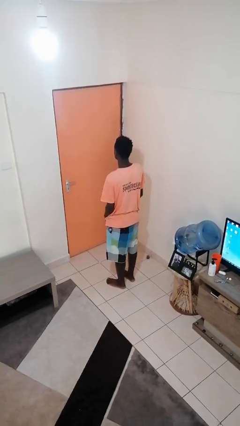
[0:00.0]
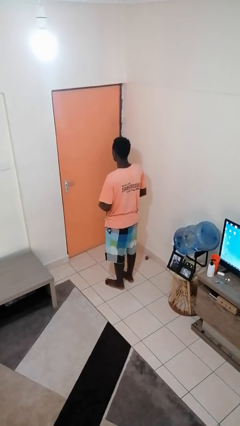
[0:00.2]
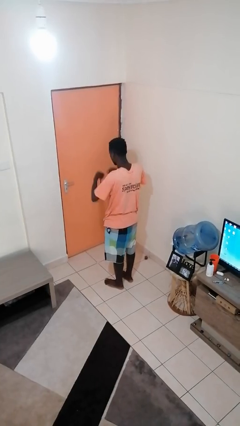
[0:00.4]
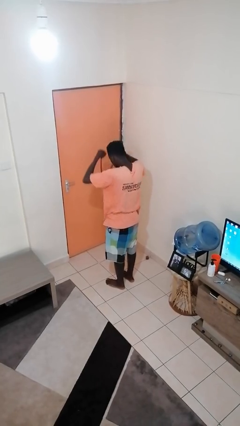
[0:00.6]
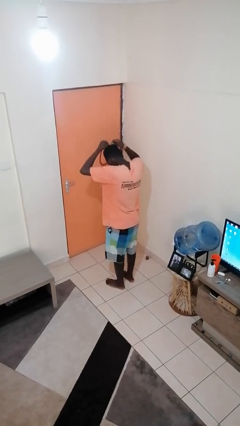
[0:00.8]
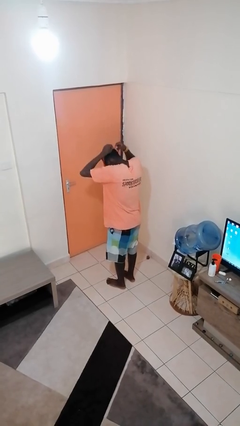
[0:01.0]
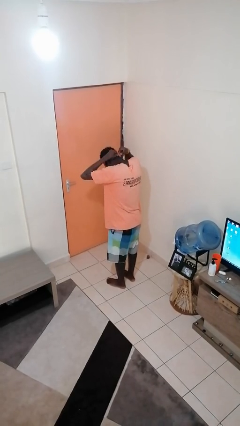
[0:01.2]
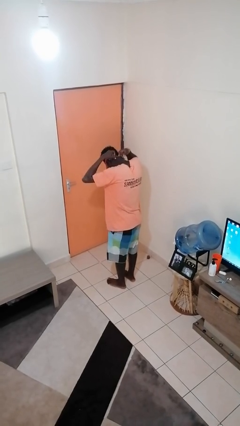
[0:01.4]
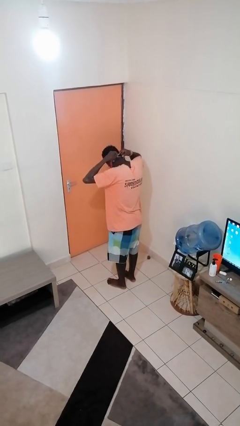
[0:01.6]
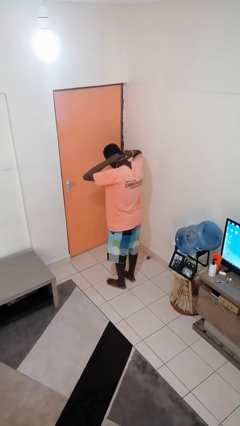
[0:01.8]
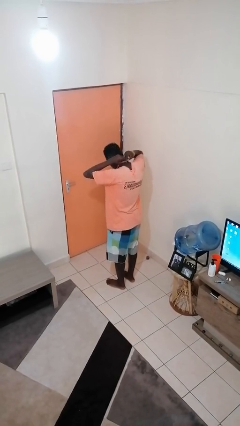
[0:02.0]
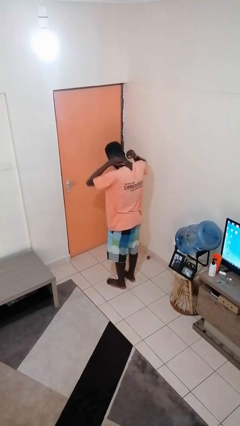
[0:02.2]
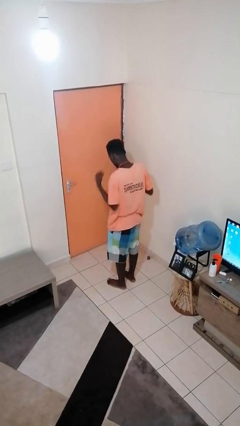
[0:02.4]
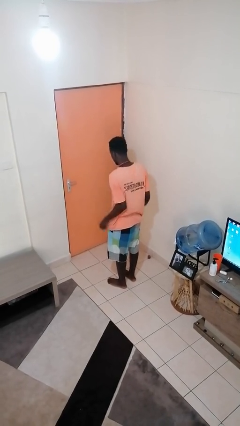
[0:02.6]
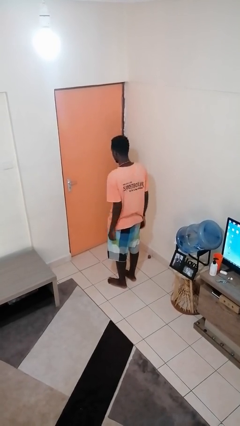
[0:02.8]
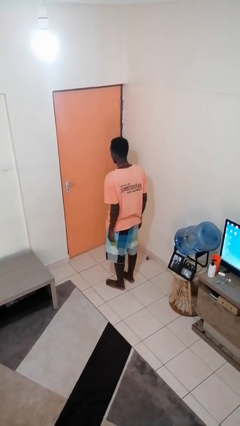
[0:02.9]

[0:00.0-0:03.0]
person puts on necklace

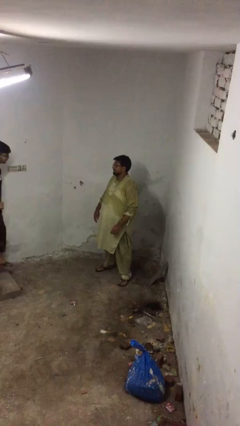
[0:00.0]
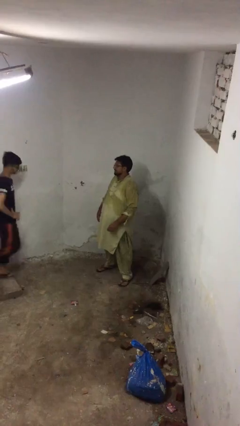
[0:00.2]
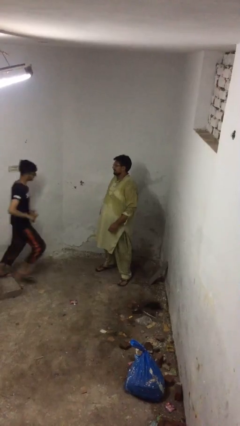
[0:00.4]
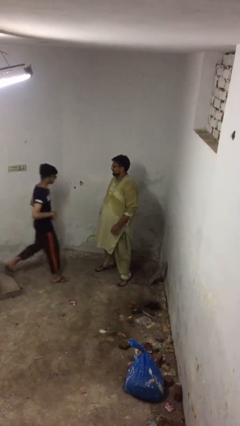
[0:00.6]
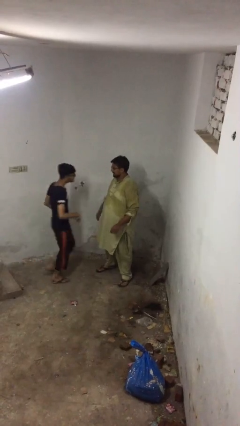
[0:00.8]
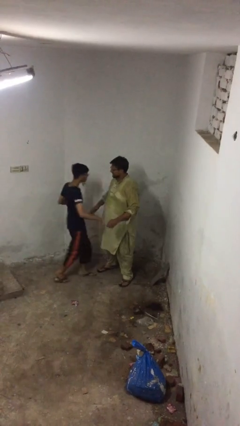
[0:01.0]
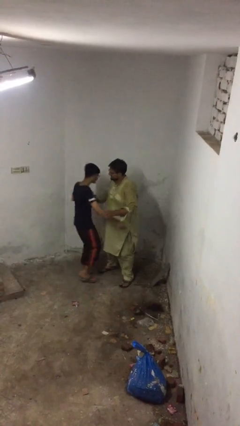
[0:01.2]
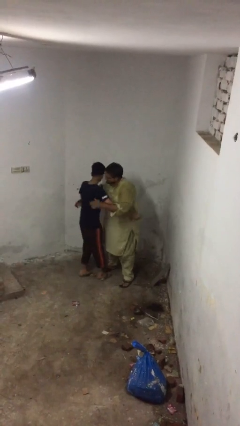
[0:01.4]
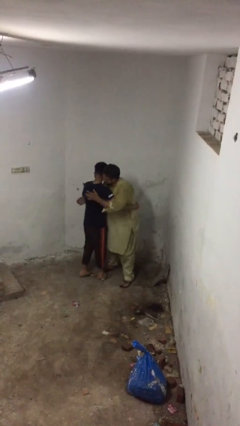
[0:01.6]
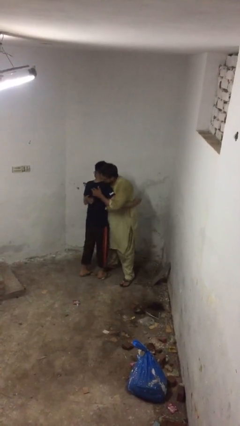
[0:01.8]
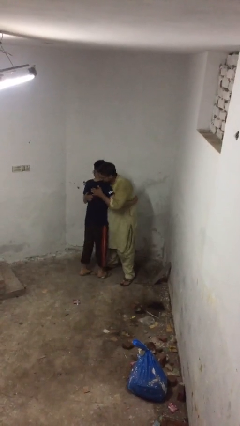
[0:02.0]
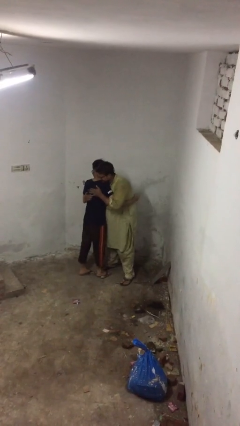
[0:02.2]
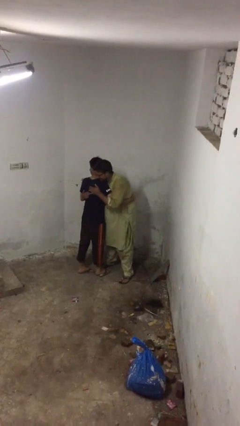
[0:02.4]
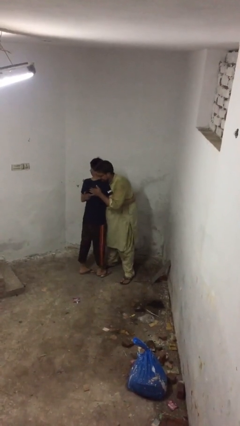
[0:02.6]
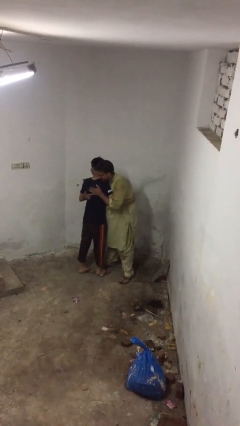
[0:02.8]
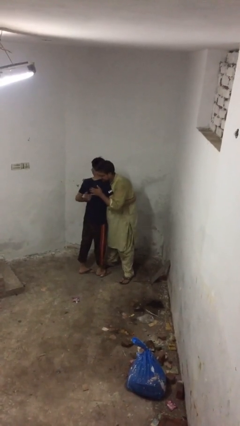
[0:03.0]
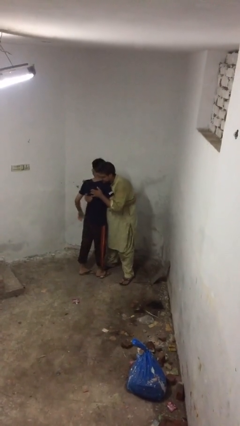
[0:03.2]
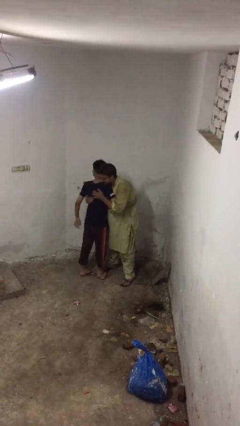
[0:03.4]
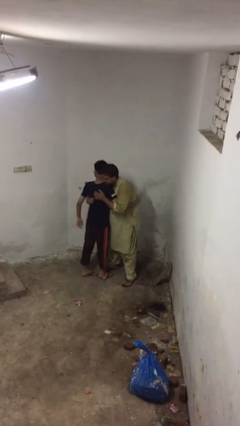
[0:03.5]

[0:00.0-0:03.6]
person embraces person

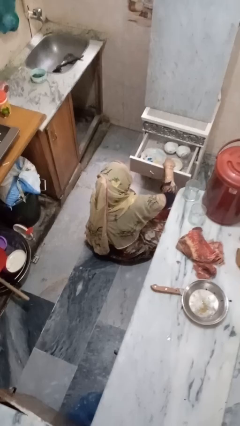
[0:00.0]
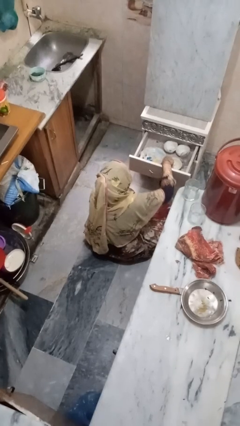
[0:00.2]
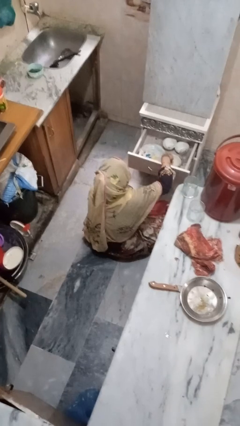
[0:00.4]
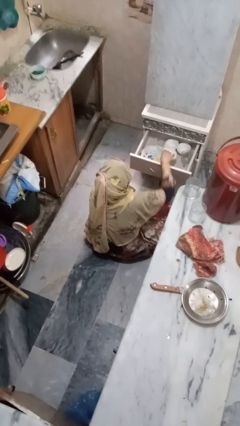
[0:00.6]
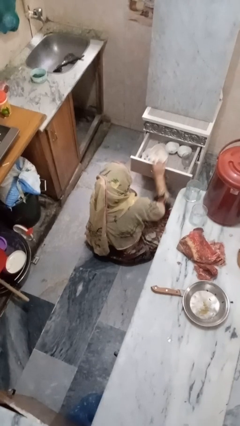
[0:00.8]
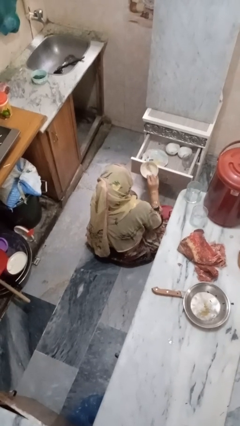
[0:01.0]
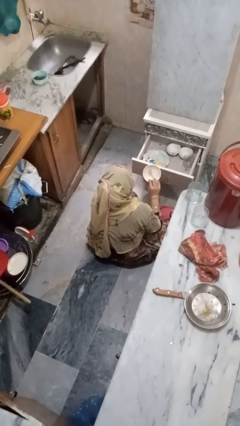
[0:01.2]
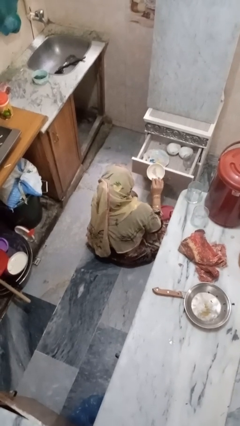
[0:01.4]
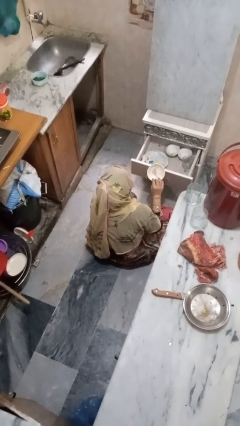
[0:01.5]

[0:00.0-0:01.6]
person takes object from kitchen drawer

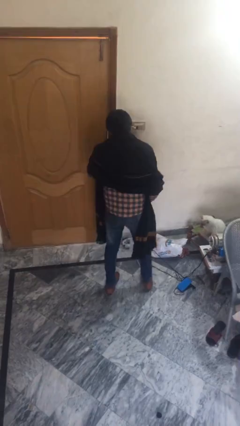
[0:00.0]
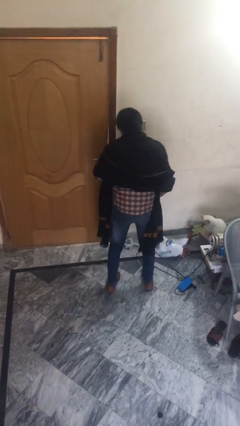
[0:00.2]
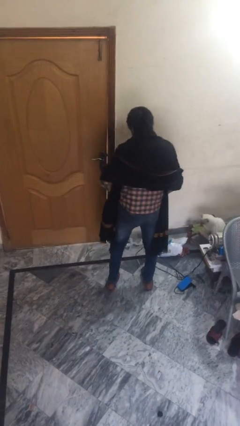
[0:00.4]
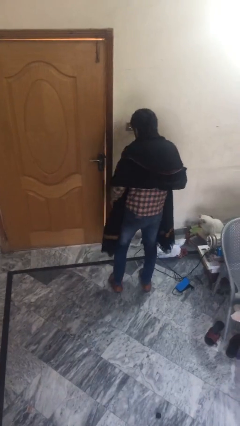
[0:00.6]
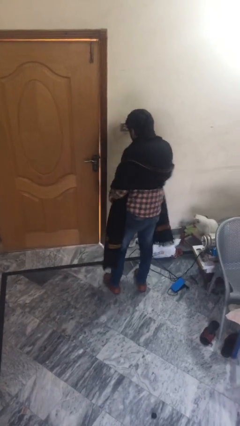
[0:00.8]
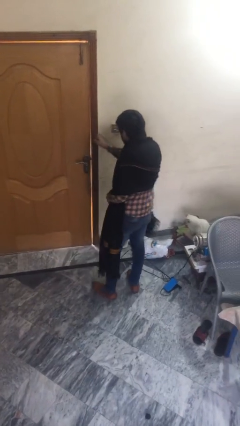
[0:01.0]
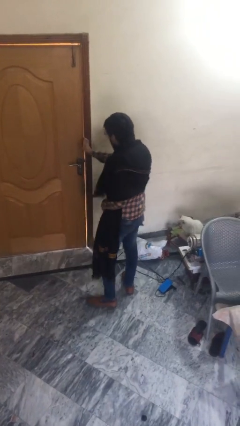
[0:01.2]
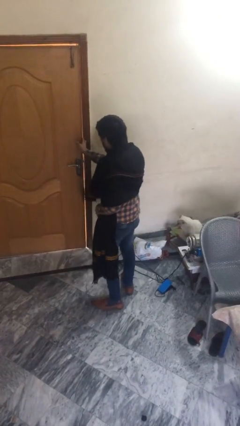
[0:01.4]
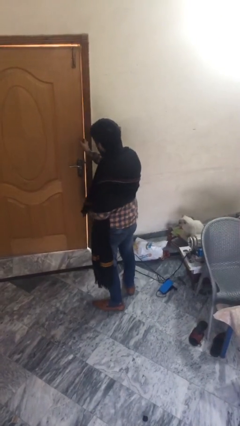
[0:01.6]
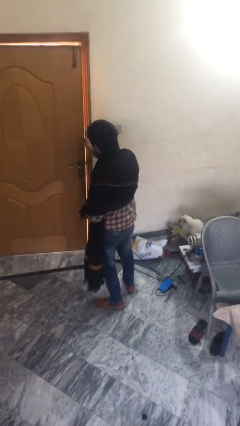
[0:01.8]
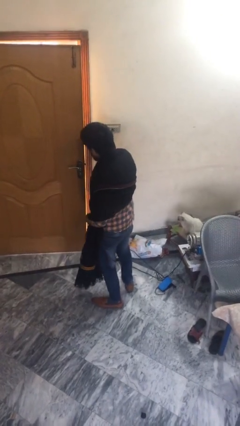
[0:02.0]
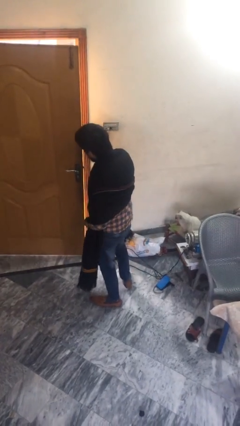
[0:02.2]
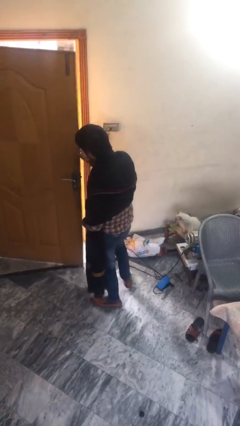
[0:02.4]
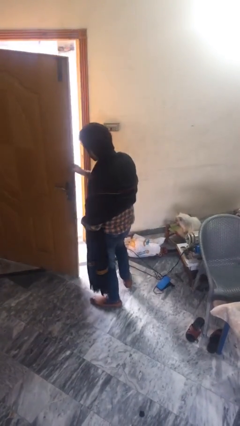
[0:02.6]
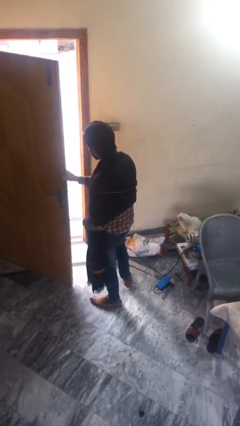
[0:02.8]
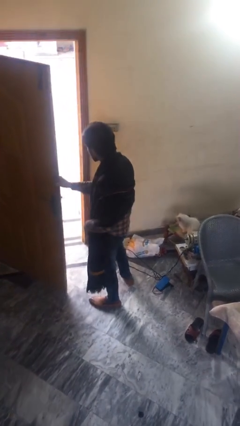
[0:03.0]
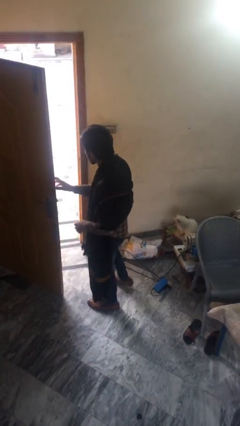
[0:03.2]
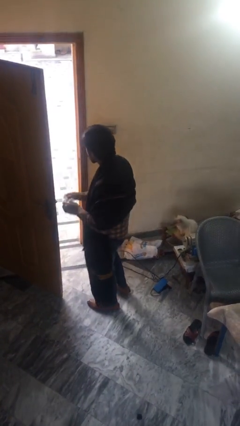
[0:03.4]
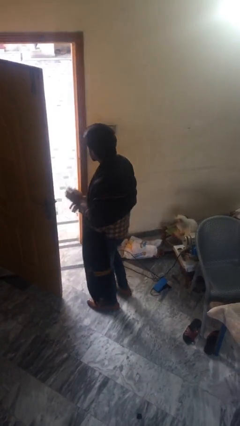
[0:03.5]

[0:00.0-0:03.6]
person opens facility door

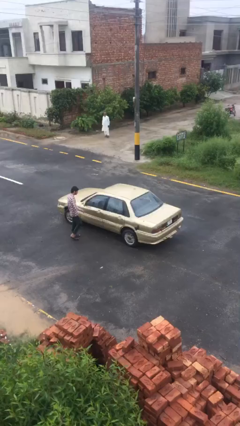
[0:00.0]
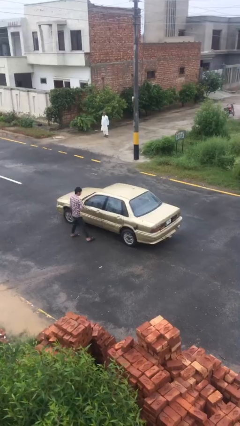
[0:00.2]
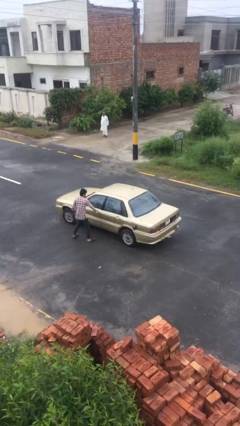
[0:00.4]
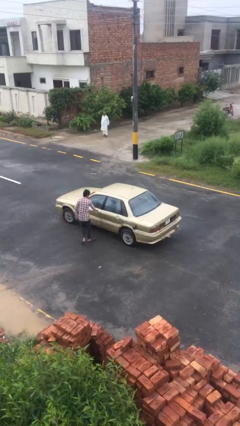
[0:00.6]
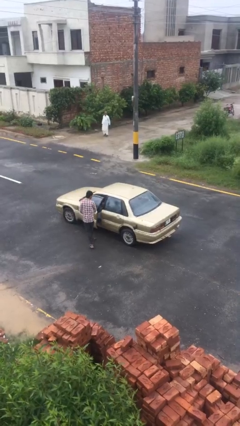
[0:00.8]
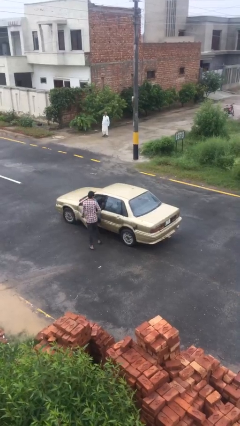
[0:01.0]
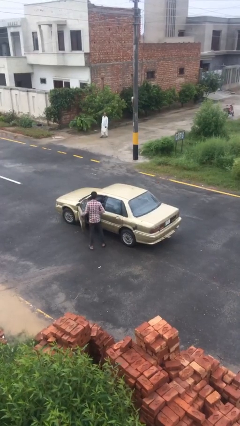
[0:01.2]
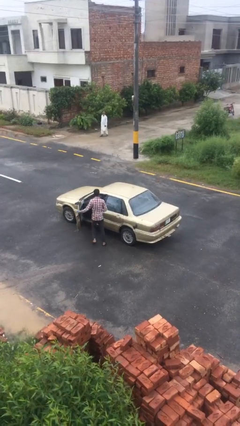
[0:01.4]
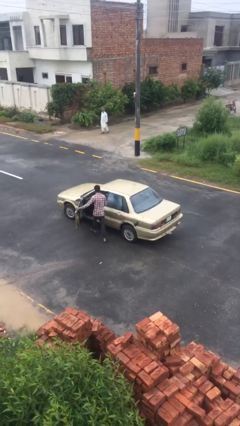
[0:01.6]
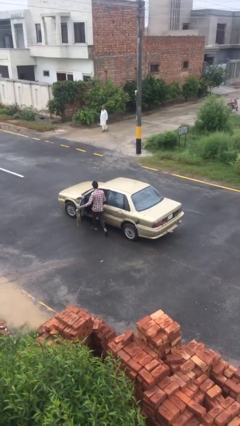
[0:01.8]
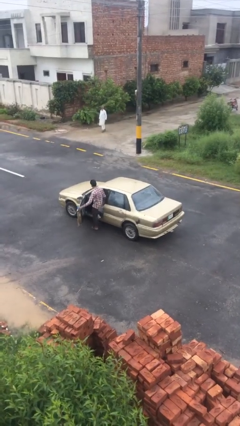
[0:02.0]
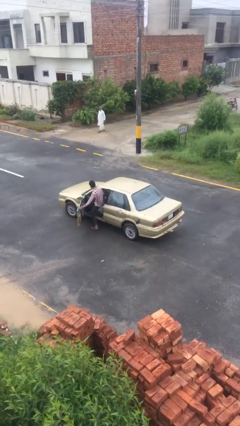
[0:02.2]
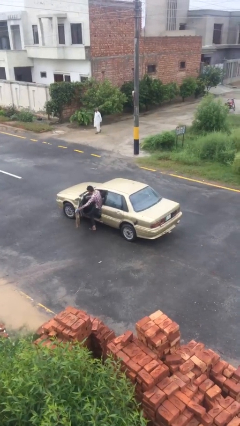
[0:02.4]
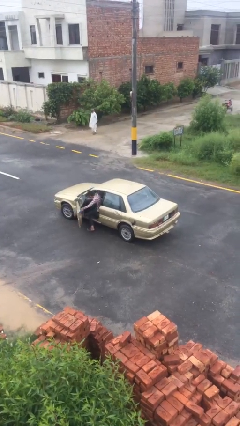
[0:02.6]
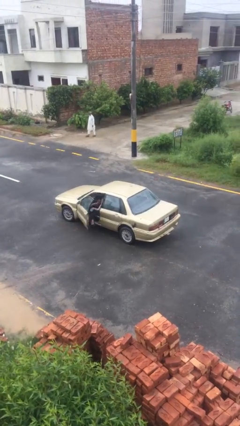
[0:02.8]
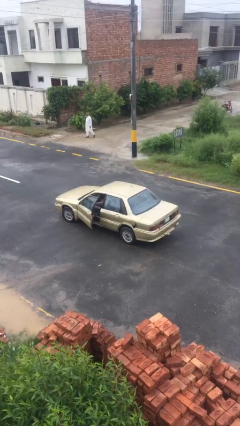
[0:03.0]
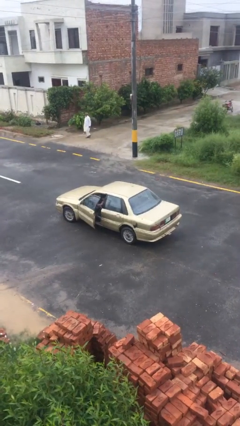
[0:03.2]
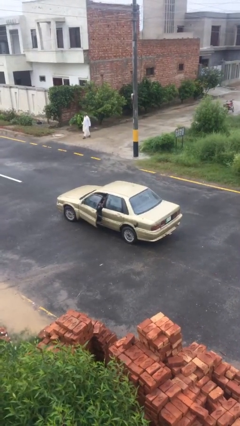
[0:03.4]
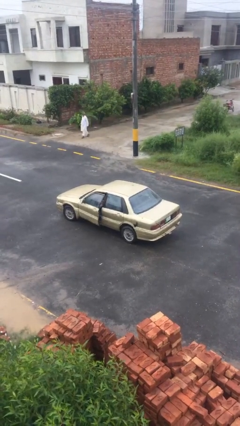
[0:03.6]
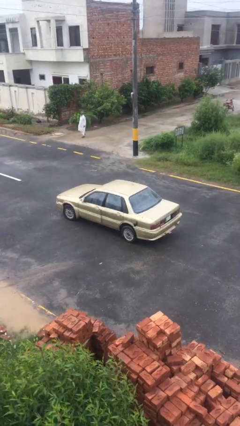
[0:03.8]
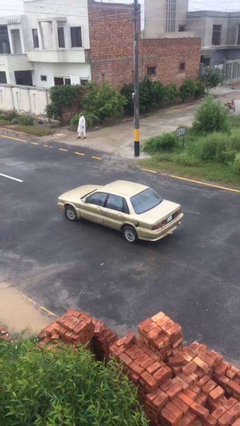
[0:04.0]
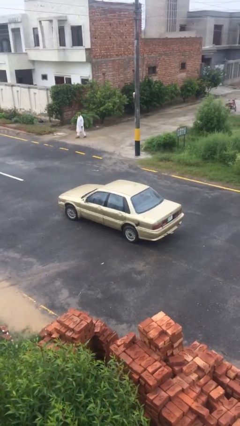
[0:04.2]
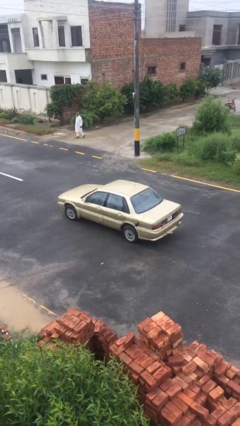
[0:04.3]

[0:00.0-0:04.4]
car picks up person

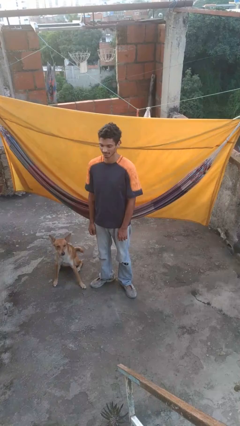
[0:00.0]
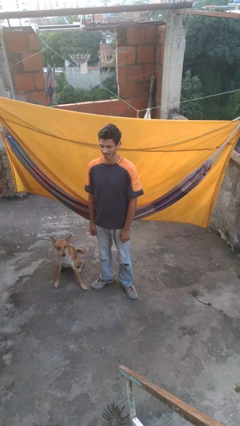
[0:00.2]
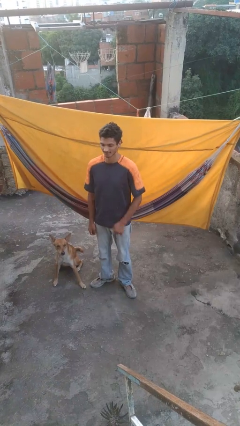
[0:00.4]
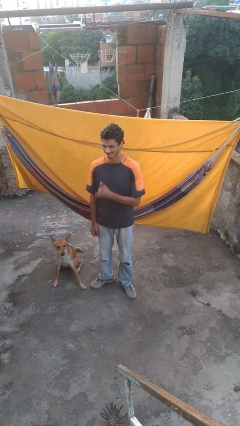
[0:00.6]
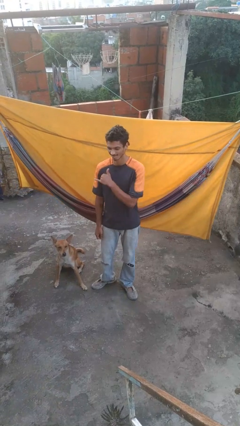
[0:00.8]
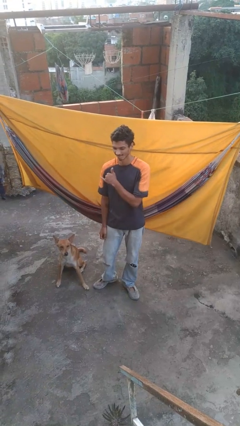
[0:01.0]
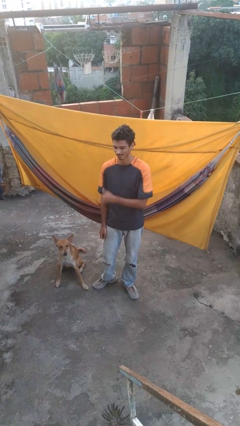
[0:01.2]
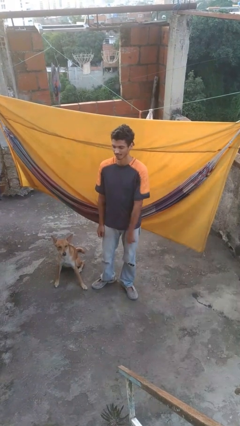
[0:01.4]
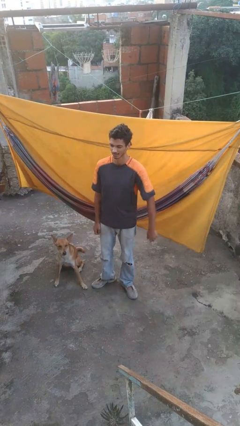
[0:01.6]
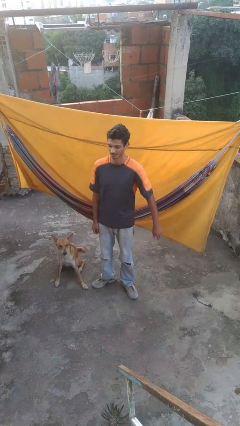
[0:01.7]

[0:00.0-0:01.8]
person gestures hang loose
